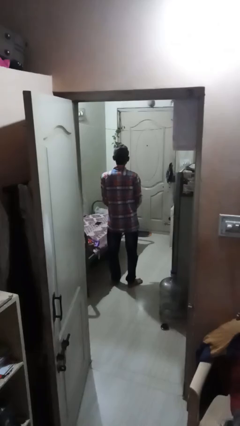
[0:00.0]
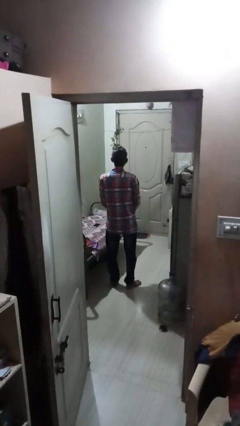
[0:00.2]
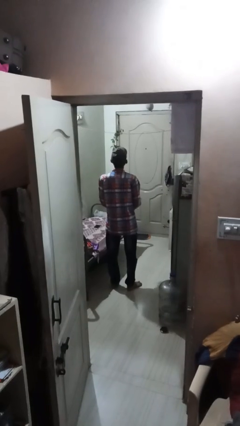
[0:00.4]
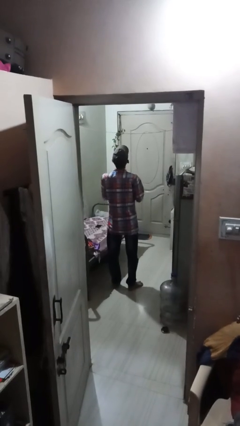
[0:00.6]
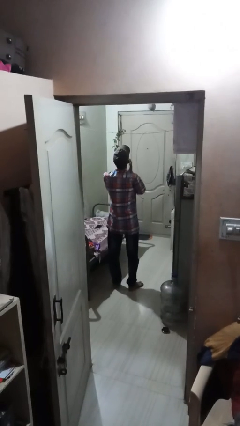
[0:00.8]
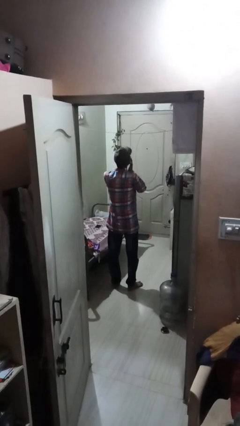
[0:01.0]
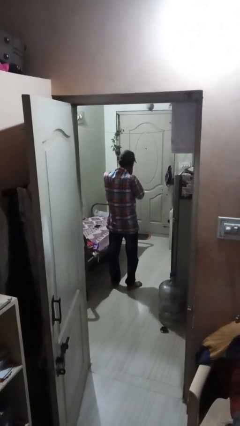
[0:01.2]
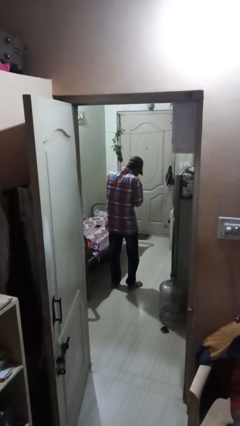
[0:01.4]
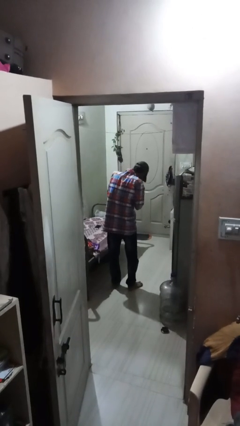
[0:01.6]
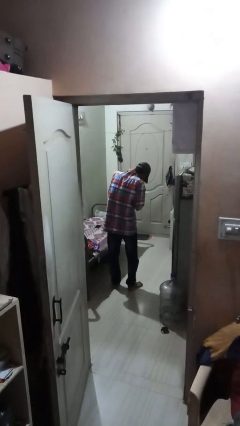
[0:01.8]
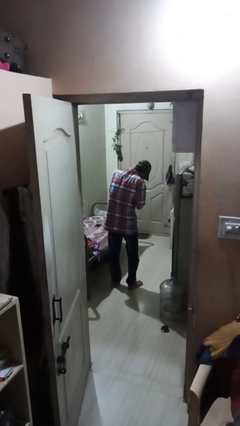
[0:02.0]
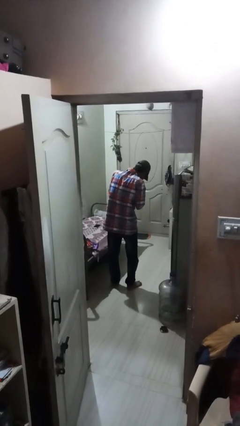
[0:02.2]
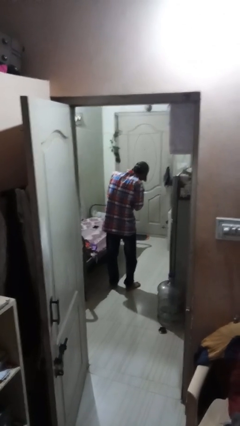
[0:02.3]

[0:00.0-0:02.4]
person sneezes into hand

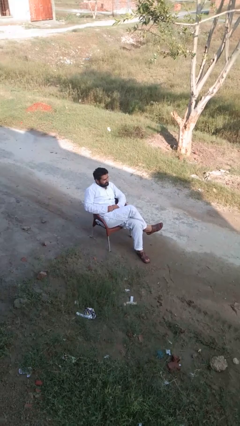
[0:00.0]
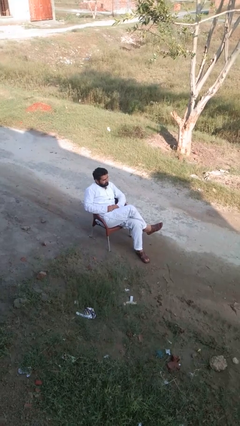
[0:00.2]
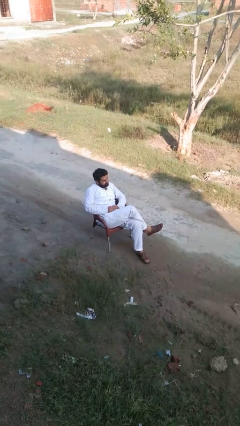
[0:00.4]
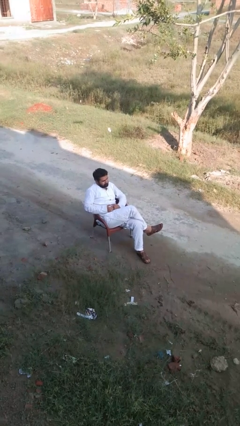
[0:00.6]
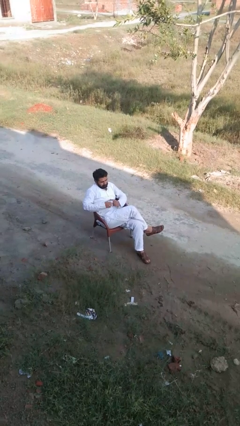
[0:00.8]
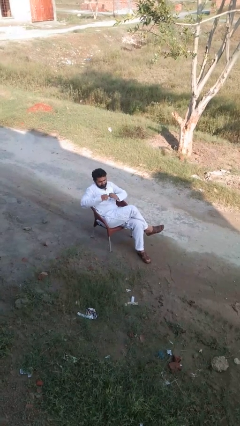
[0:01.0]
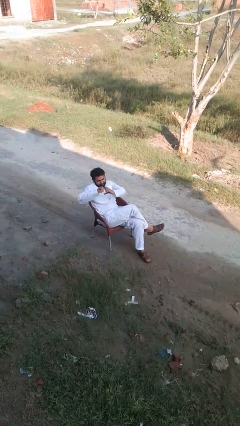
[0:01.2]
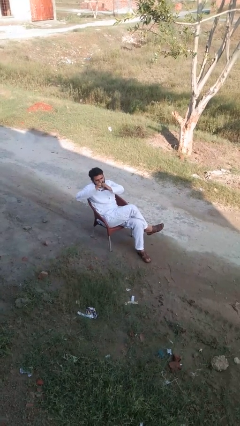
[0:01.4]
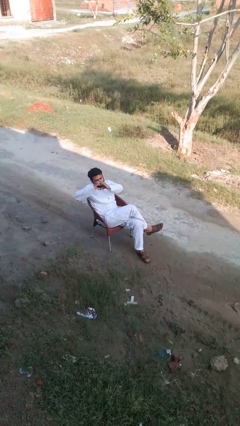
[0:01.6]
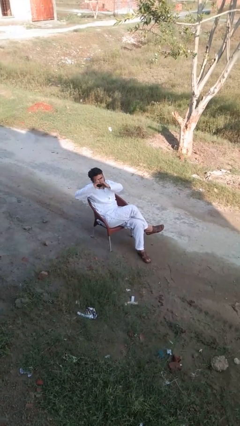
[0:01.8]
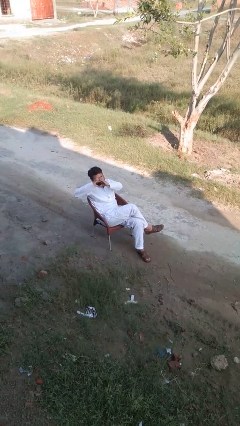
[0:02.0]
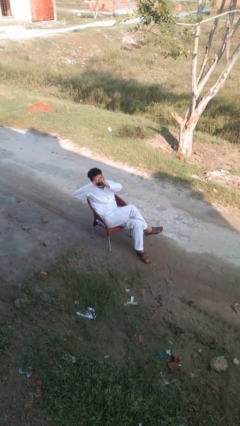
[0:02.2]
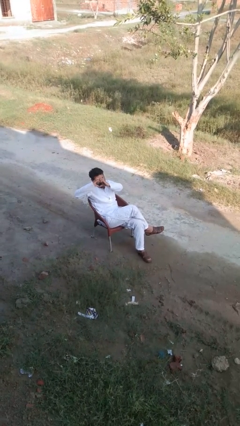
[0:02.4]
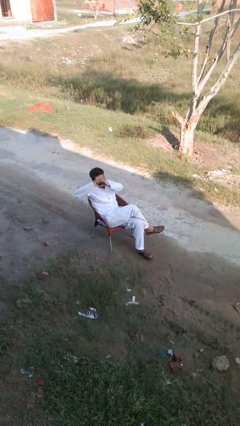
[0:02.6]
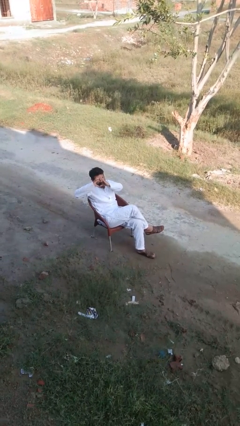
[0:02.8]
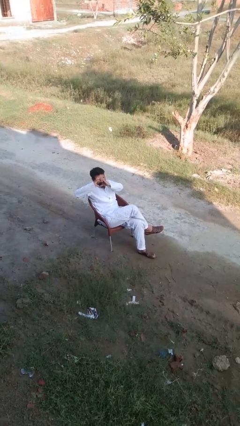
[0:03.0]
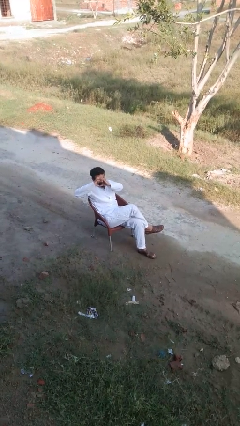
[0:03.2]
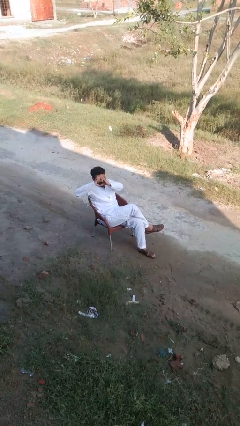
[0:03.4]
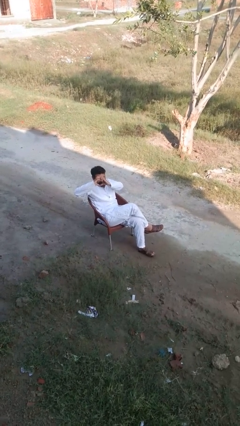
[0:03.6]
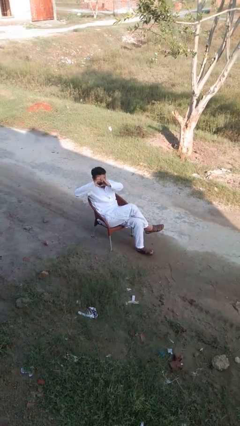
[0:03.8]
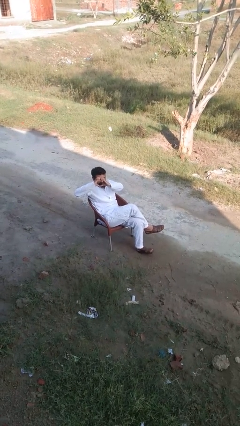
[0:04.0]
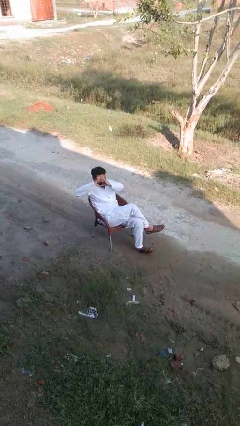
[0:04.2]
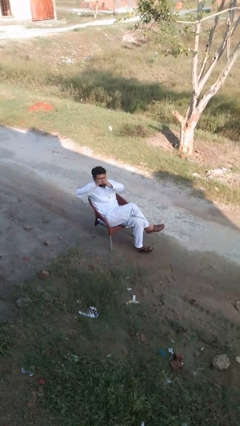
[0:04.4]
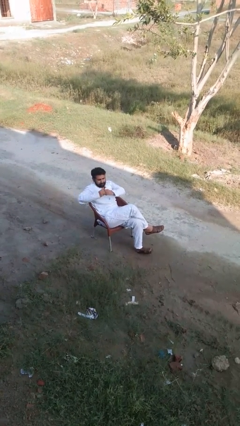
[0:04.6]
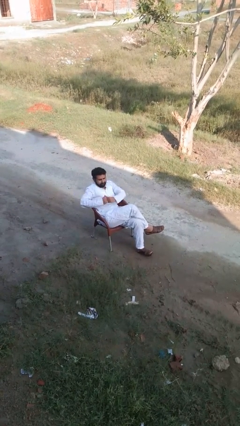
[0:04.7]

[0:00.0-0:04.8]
person gestures heart

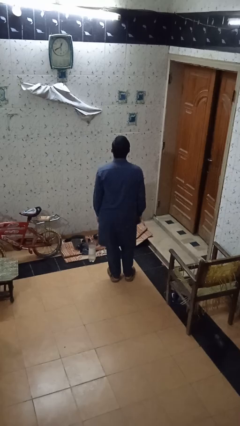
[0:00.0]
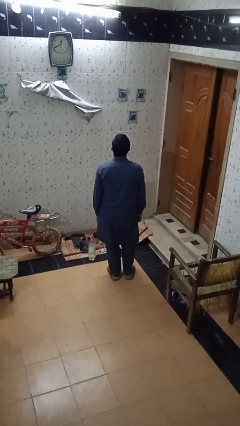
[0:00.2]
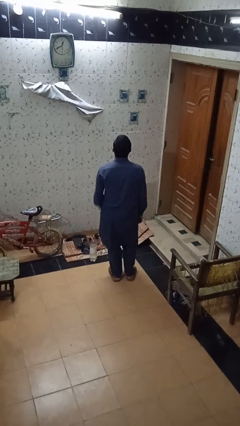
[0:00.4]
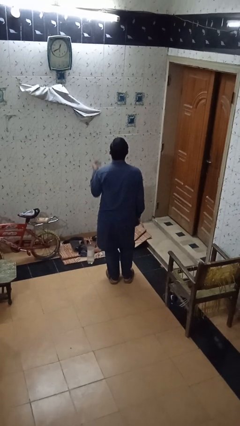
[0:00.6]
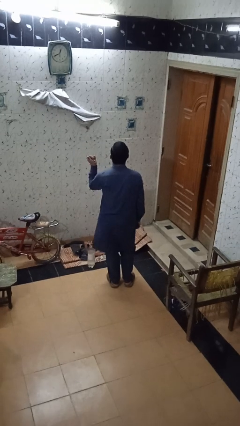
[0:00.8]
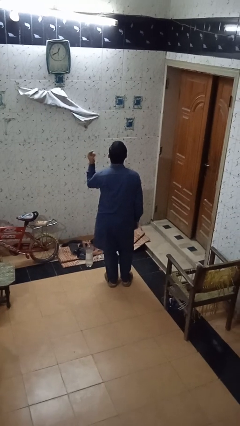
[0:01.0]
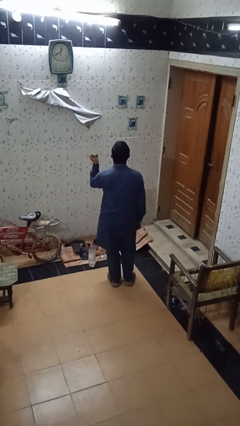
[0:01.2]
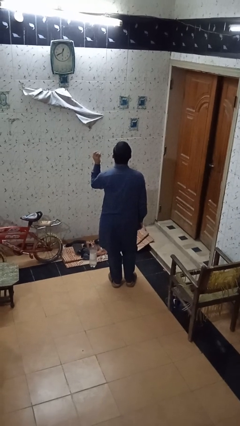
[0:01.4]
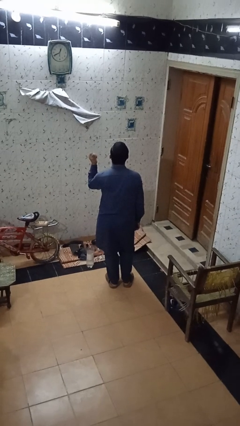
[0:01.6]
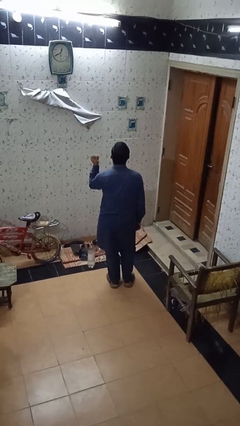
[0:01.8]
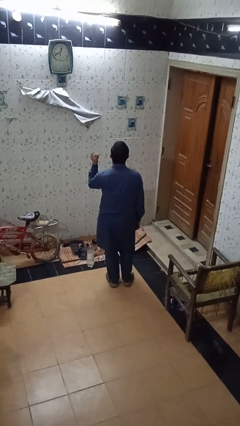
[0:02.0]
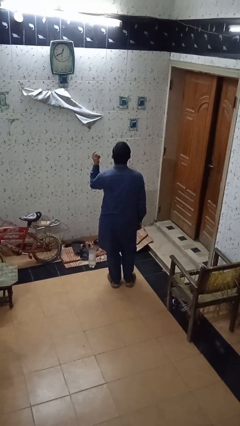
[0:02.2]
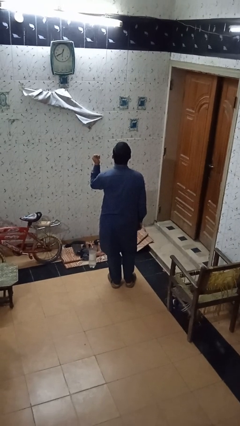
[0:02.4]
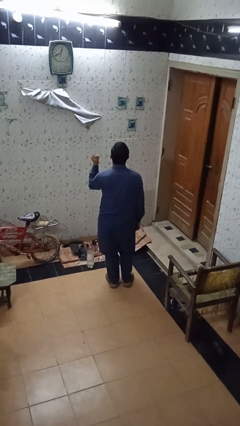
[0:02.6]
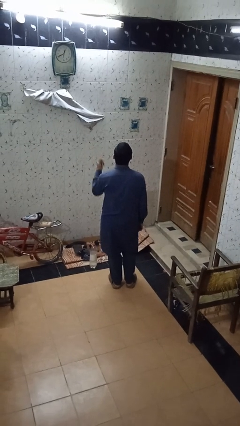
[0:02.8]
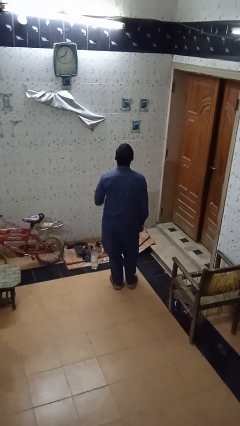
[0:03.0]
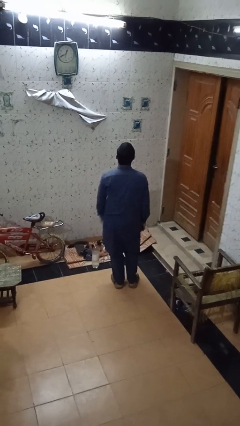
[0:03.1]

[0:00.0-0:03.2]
person snaps fingers

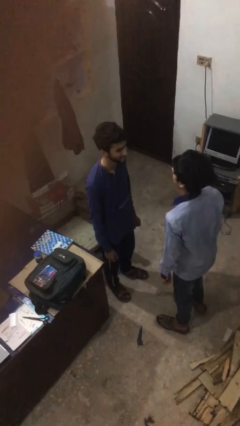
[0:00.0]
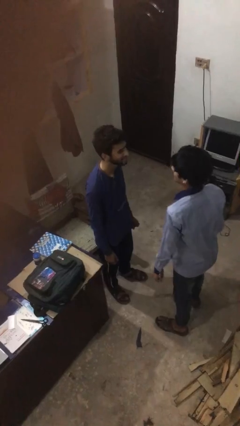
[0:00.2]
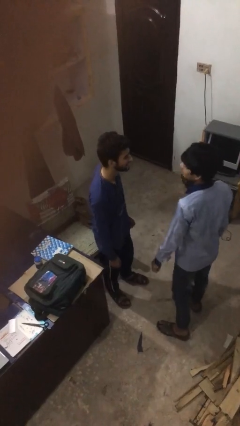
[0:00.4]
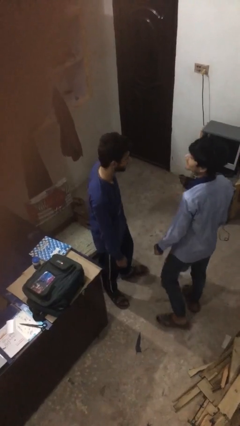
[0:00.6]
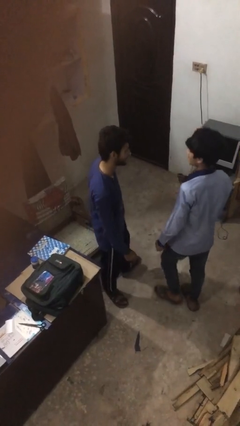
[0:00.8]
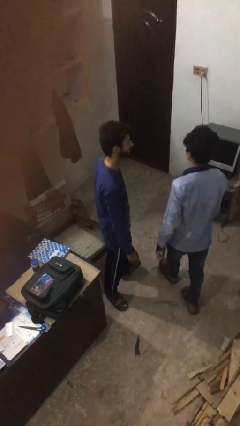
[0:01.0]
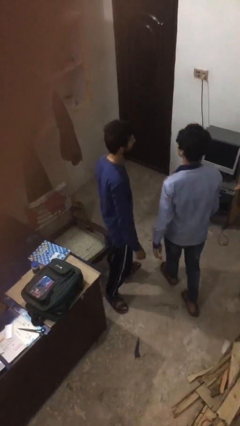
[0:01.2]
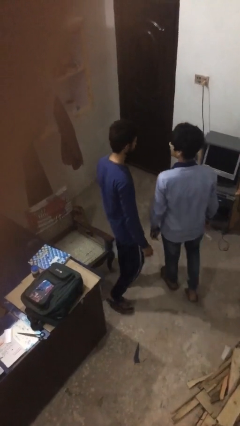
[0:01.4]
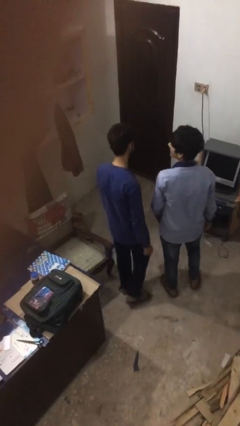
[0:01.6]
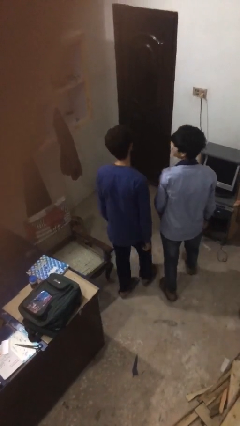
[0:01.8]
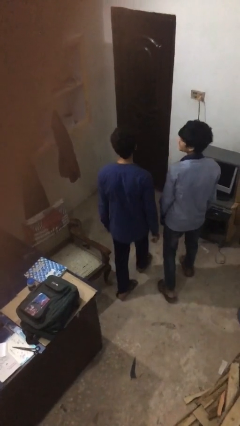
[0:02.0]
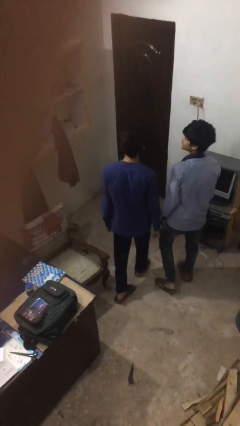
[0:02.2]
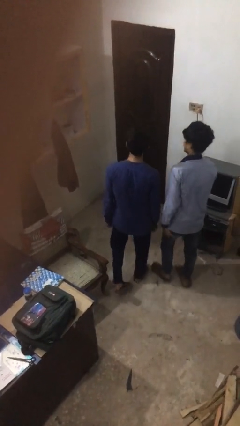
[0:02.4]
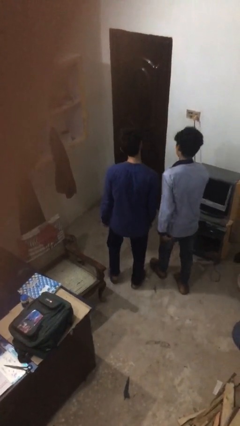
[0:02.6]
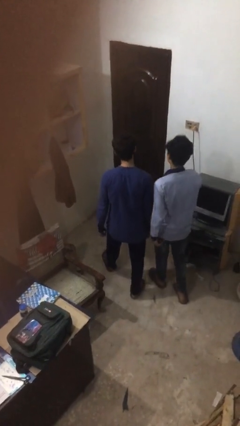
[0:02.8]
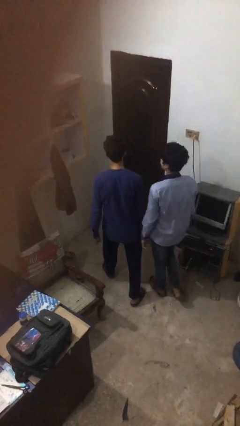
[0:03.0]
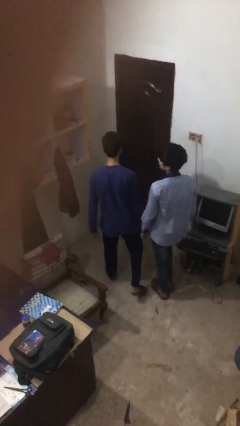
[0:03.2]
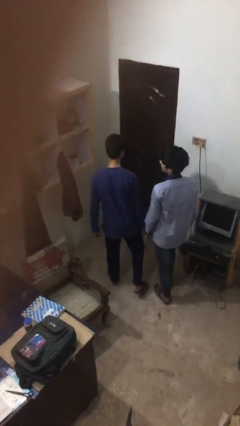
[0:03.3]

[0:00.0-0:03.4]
person talks to person

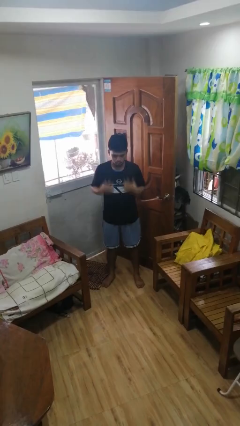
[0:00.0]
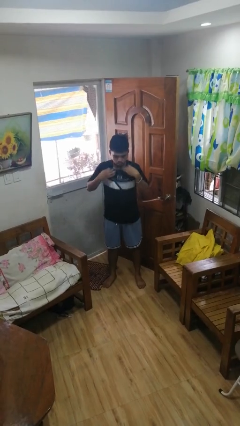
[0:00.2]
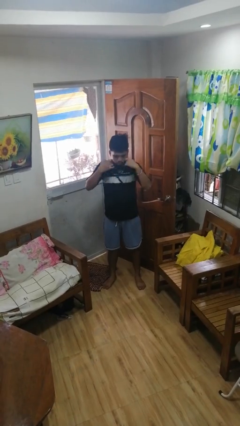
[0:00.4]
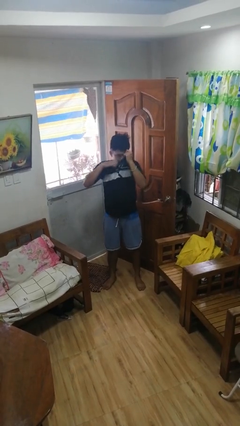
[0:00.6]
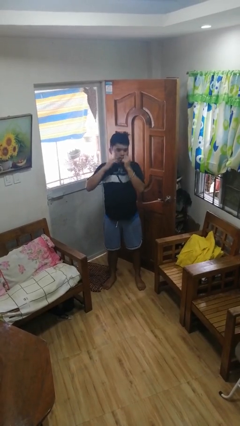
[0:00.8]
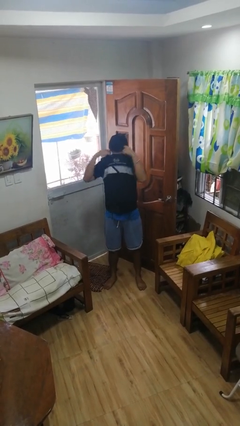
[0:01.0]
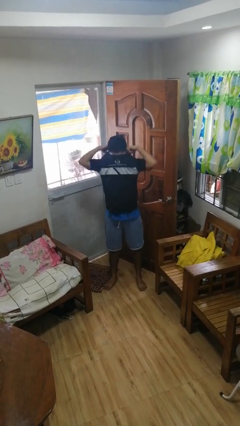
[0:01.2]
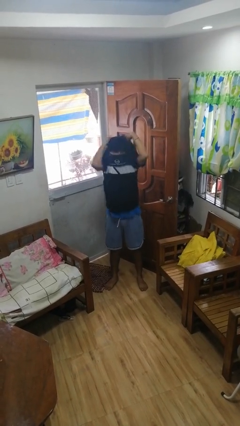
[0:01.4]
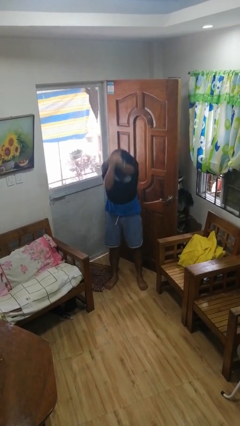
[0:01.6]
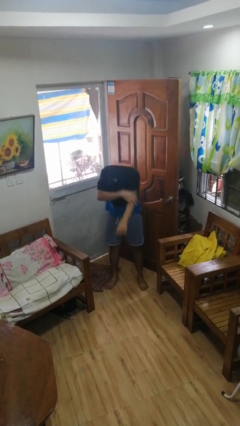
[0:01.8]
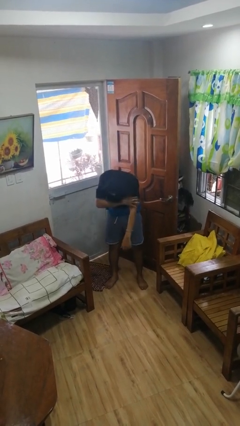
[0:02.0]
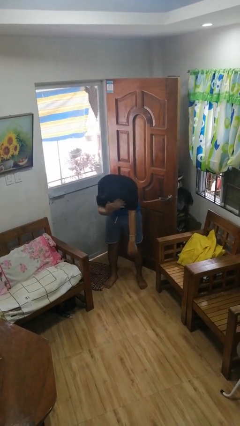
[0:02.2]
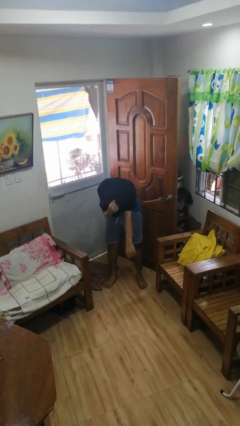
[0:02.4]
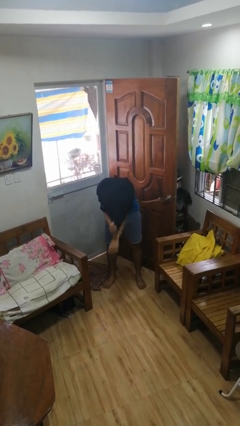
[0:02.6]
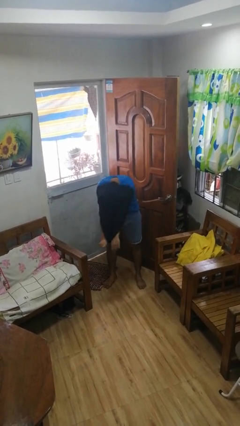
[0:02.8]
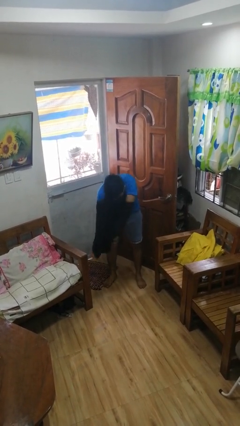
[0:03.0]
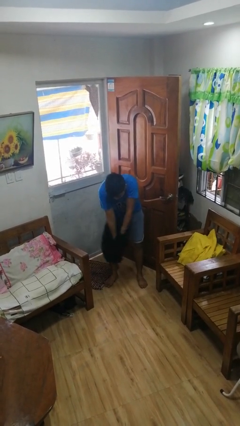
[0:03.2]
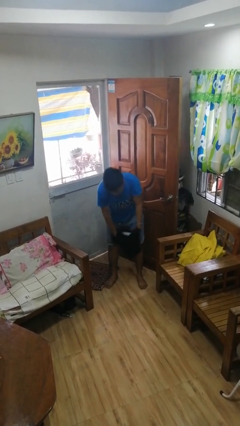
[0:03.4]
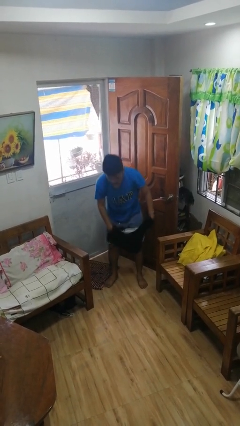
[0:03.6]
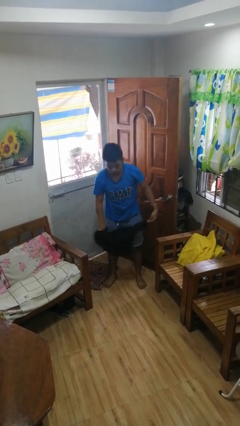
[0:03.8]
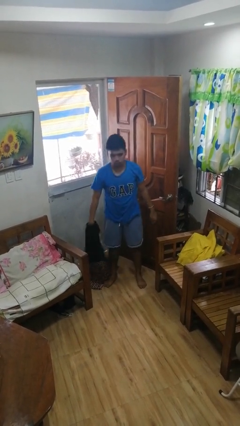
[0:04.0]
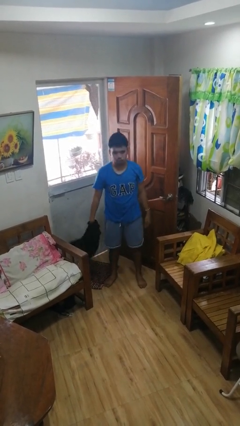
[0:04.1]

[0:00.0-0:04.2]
person takes off shirt
